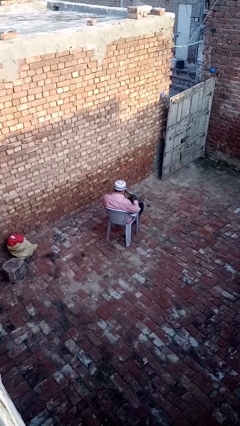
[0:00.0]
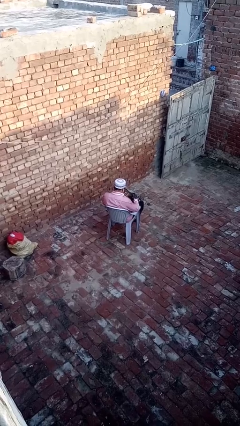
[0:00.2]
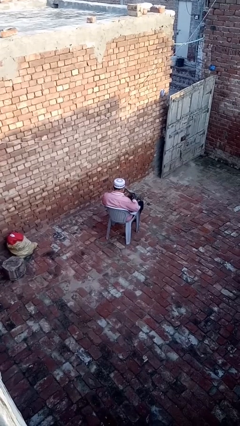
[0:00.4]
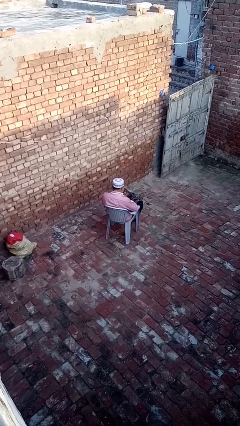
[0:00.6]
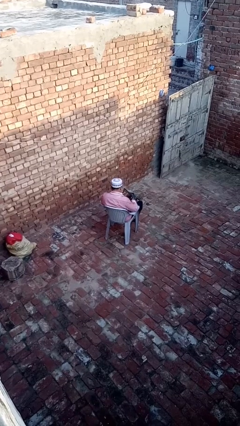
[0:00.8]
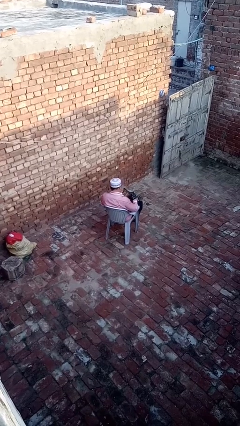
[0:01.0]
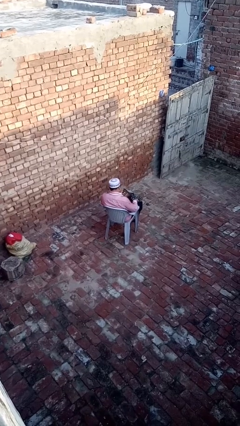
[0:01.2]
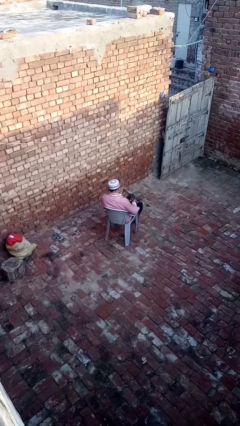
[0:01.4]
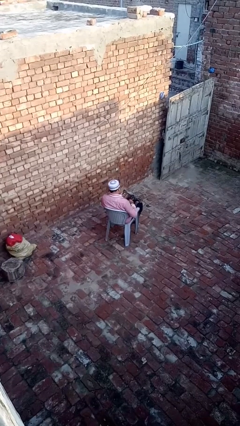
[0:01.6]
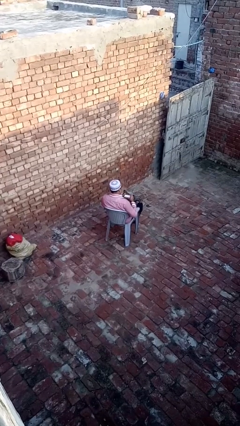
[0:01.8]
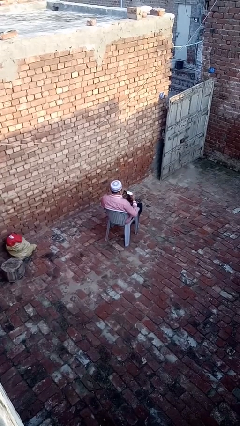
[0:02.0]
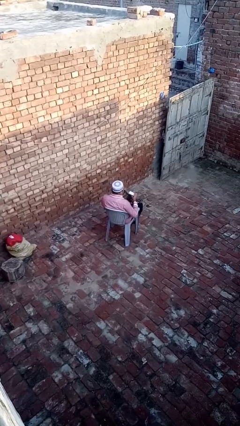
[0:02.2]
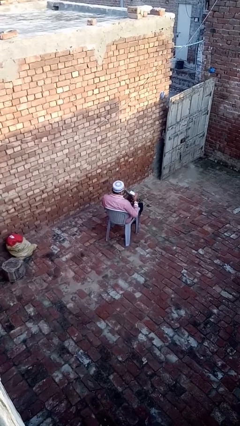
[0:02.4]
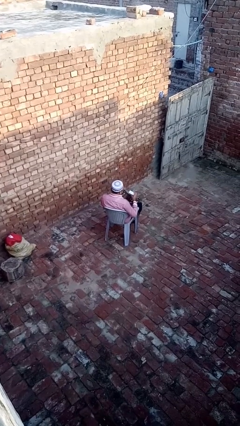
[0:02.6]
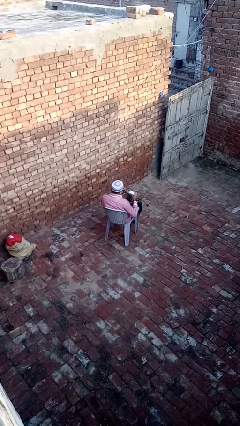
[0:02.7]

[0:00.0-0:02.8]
person takes object from purse

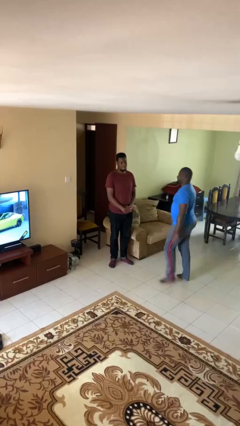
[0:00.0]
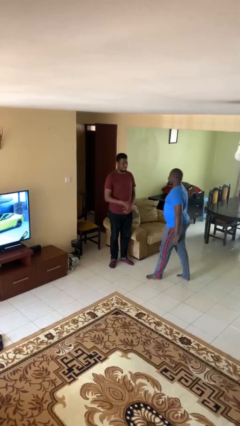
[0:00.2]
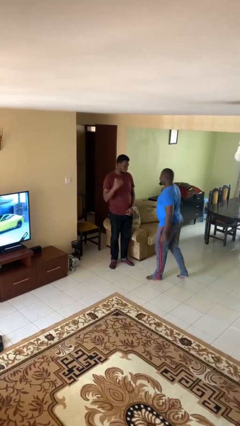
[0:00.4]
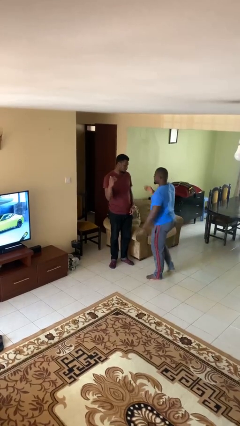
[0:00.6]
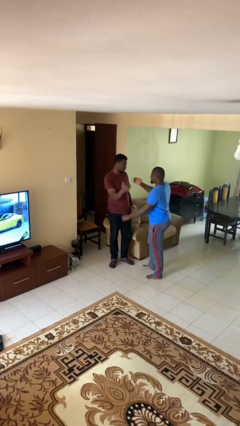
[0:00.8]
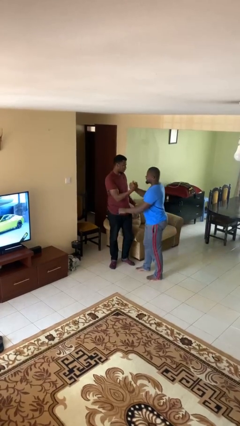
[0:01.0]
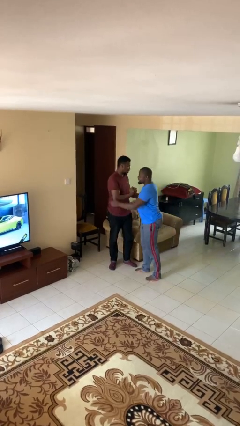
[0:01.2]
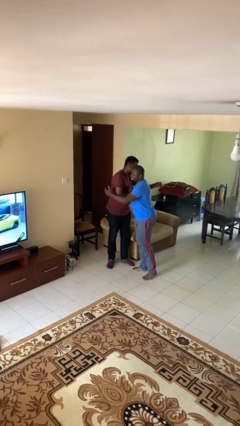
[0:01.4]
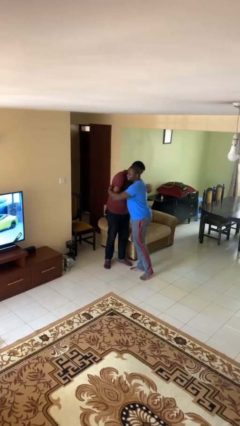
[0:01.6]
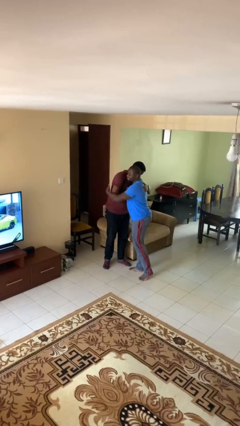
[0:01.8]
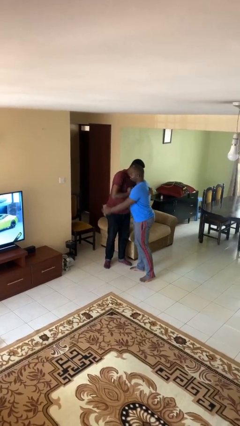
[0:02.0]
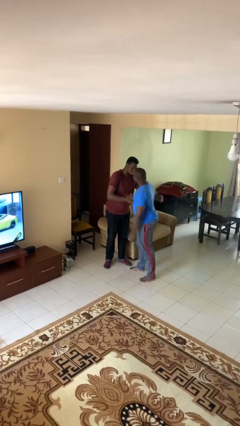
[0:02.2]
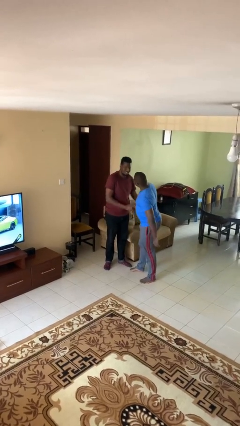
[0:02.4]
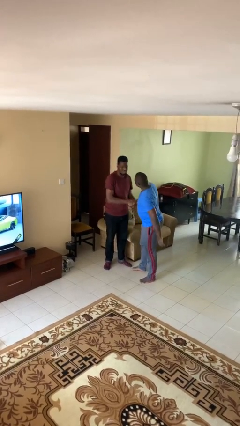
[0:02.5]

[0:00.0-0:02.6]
person embraces person

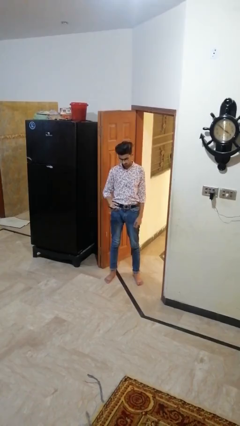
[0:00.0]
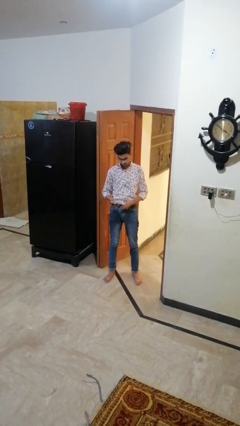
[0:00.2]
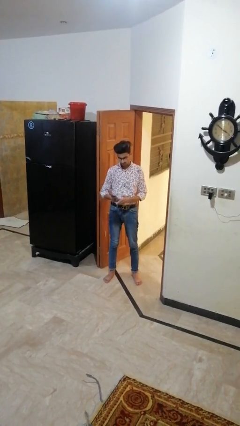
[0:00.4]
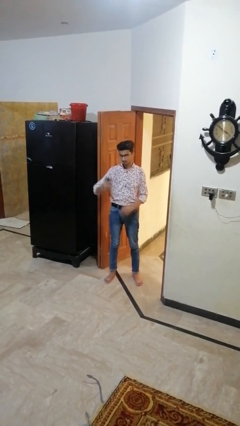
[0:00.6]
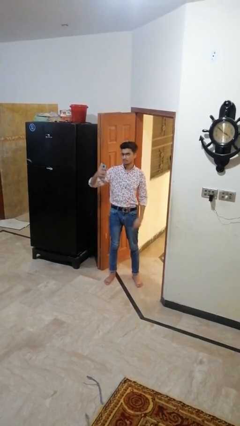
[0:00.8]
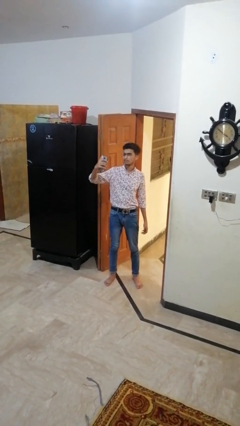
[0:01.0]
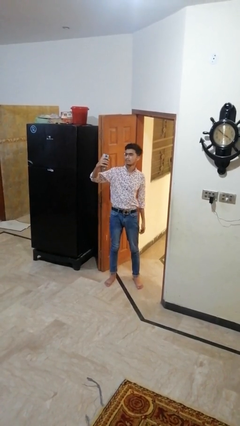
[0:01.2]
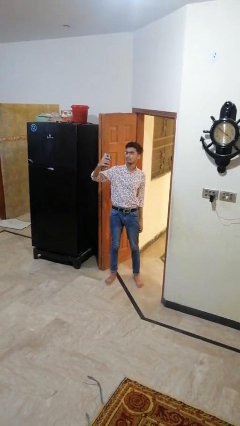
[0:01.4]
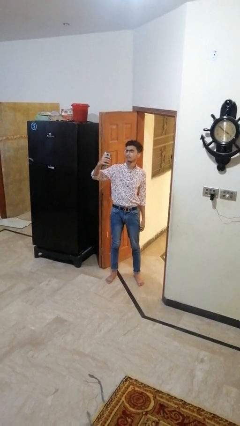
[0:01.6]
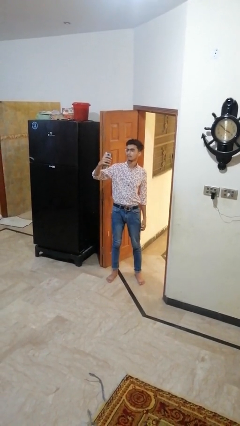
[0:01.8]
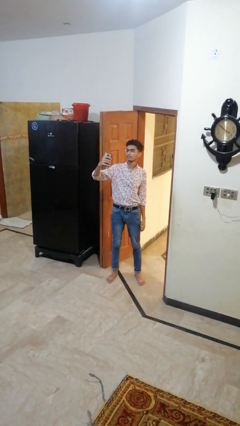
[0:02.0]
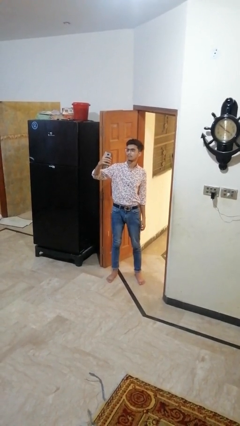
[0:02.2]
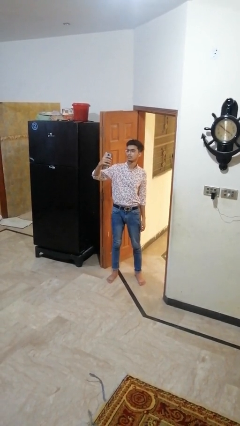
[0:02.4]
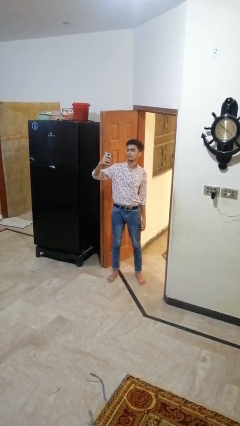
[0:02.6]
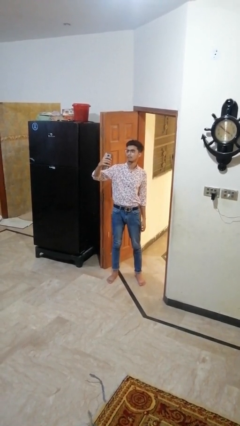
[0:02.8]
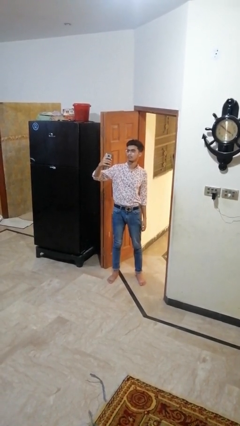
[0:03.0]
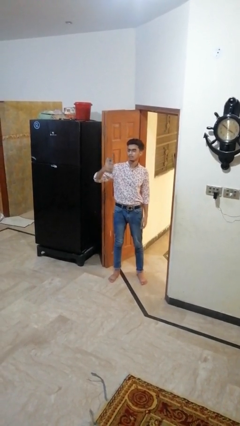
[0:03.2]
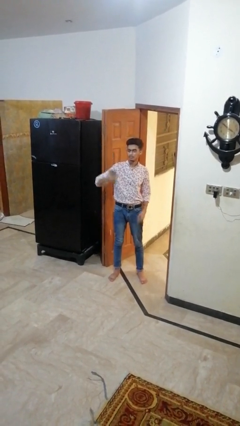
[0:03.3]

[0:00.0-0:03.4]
person takes selfie

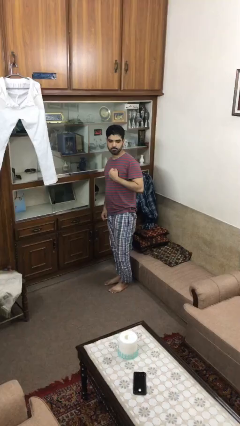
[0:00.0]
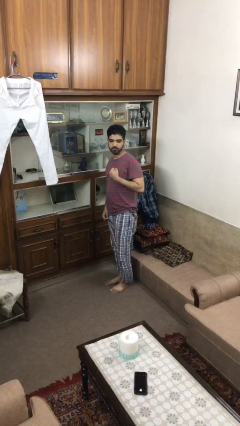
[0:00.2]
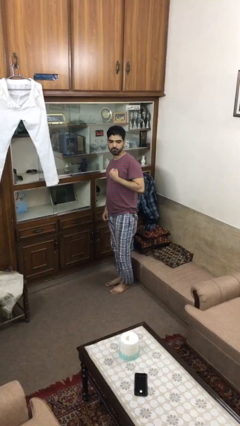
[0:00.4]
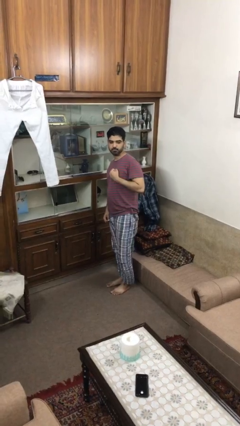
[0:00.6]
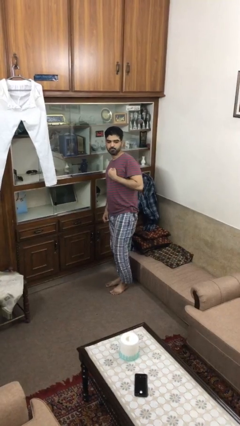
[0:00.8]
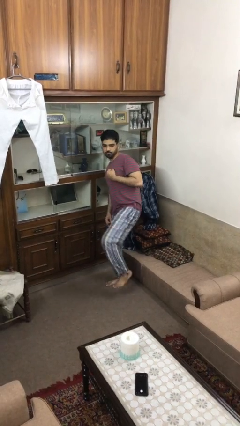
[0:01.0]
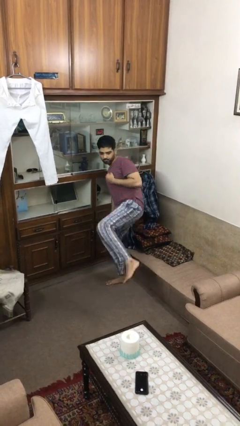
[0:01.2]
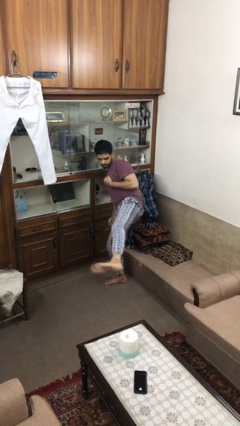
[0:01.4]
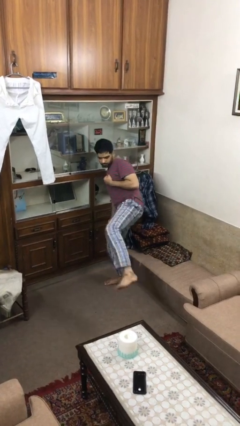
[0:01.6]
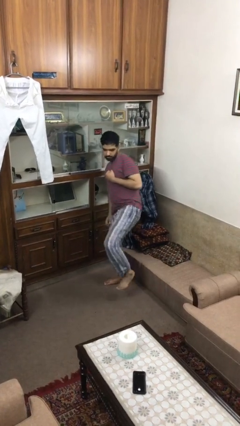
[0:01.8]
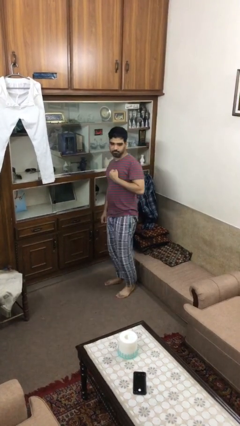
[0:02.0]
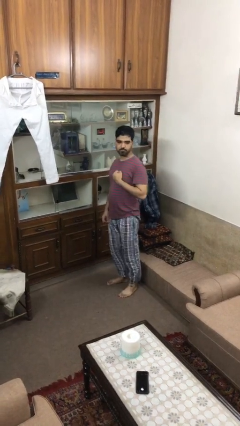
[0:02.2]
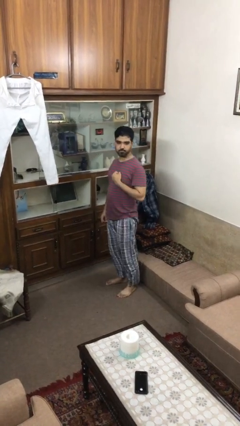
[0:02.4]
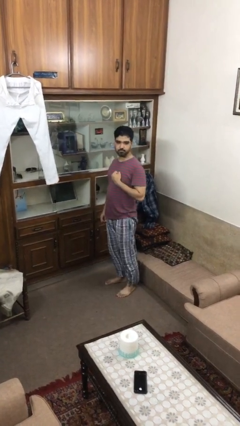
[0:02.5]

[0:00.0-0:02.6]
person karate kicks

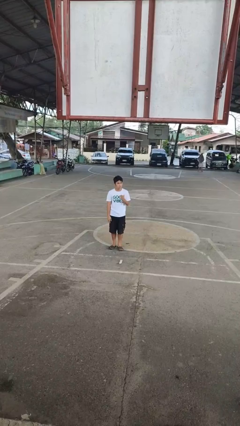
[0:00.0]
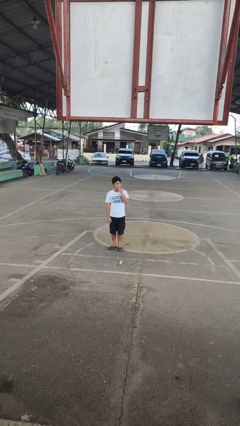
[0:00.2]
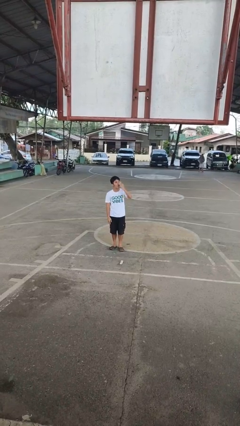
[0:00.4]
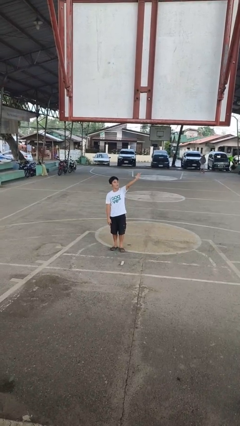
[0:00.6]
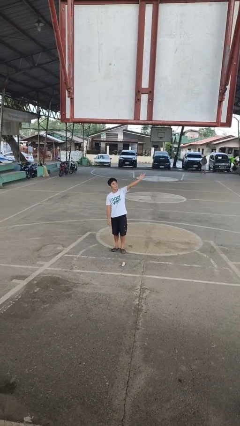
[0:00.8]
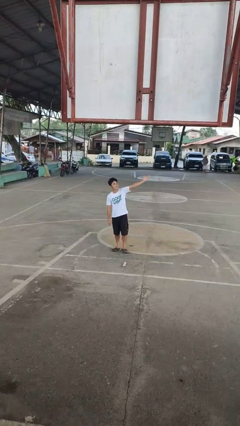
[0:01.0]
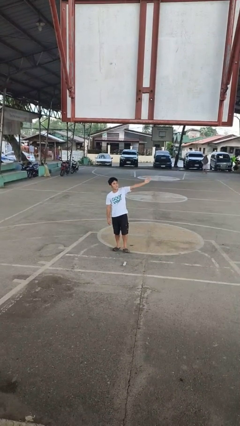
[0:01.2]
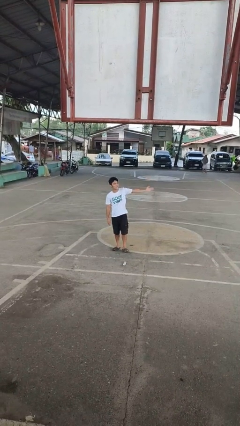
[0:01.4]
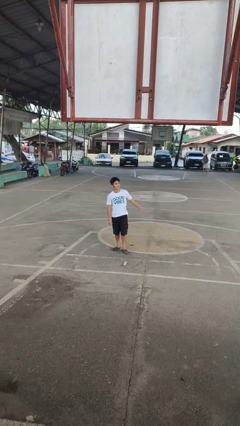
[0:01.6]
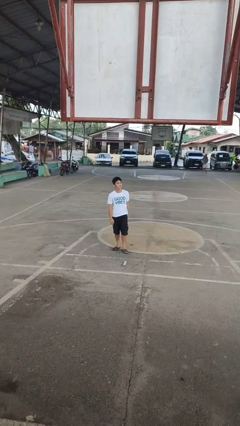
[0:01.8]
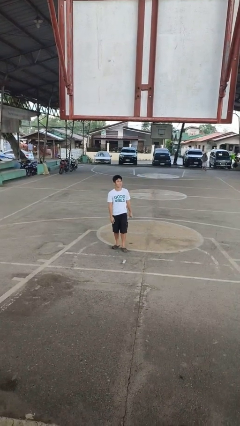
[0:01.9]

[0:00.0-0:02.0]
person gestures blow kiss

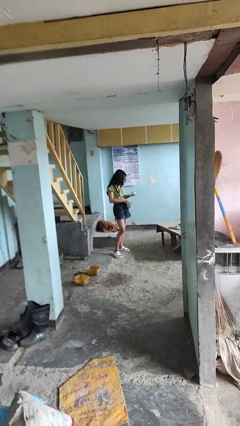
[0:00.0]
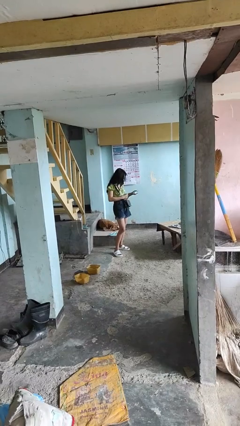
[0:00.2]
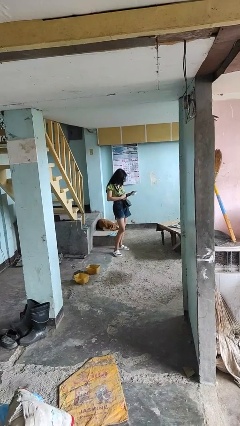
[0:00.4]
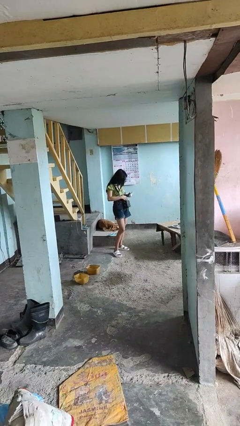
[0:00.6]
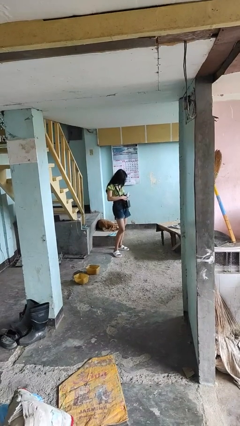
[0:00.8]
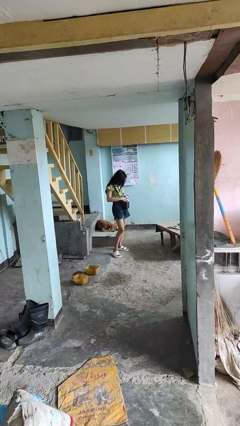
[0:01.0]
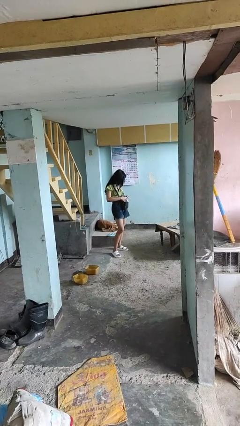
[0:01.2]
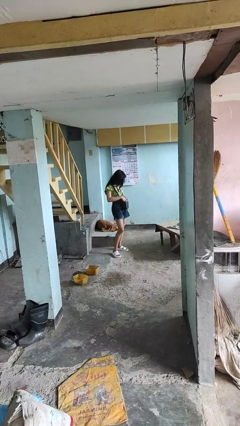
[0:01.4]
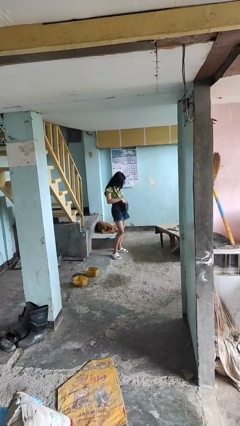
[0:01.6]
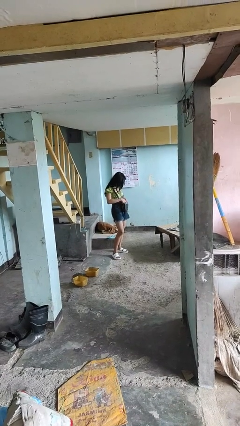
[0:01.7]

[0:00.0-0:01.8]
person puts object into purse

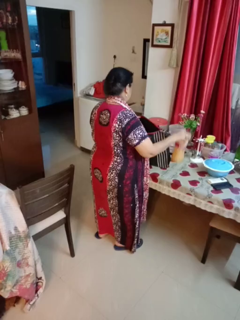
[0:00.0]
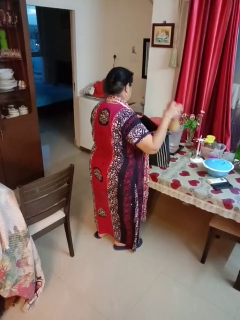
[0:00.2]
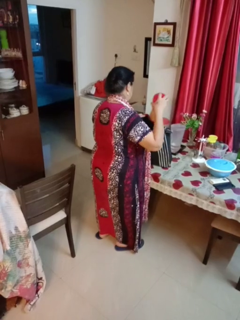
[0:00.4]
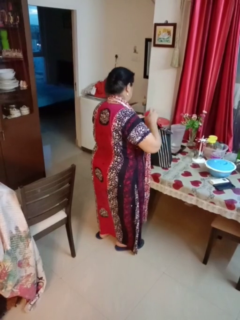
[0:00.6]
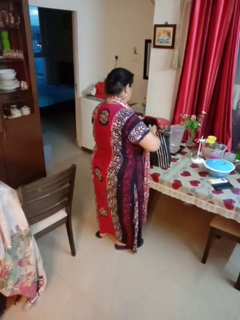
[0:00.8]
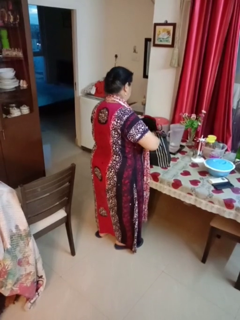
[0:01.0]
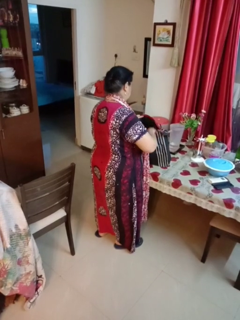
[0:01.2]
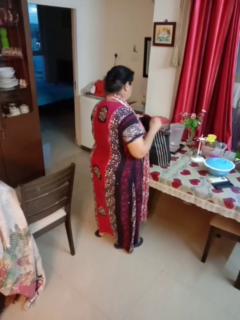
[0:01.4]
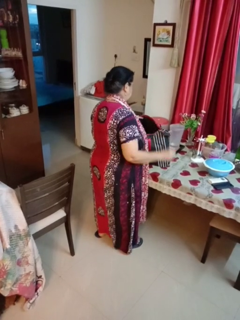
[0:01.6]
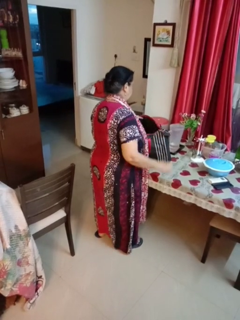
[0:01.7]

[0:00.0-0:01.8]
person puts object into bag

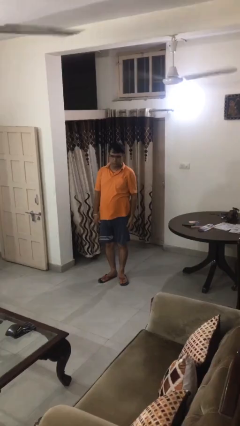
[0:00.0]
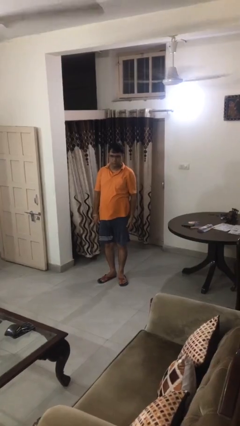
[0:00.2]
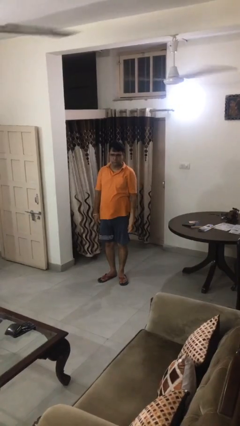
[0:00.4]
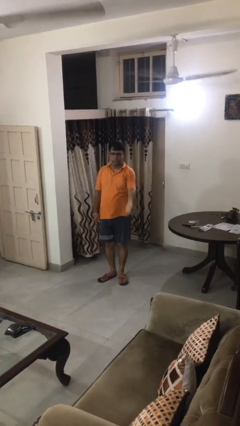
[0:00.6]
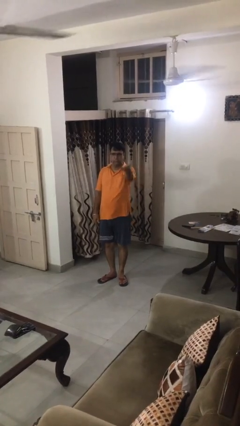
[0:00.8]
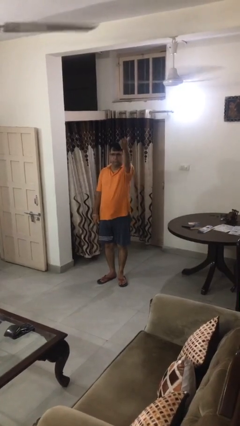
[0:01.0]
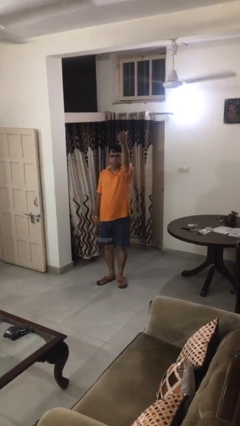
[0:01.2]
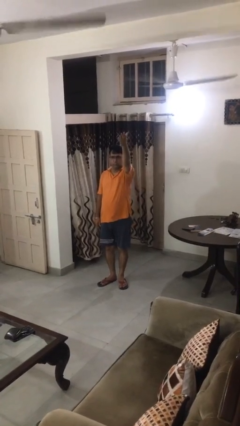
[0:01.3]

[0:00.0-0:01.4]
person gestures swipe up
